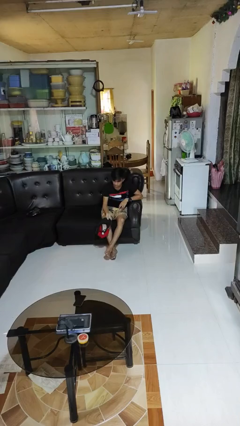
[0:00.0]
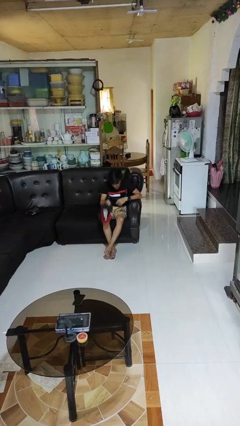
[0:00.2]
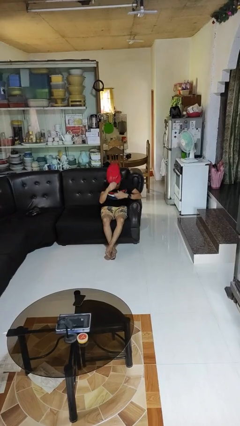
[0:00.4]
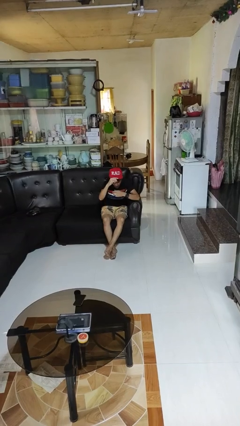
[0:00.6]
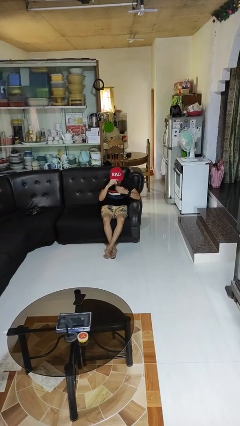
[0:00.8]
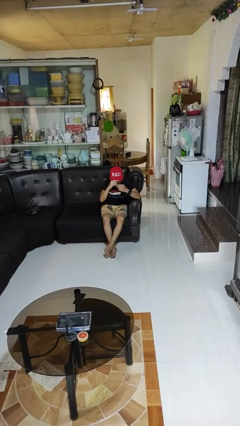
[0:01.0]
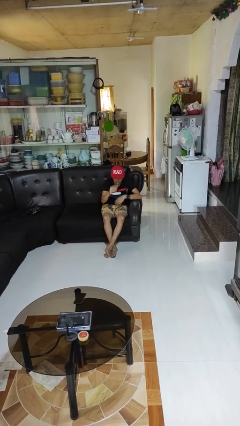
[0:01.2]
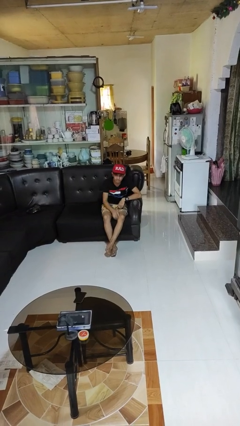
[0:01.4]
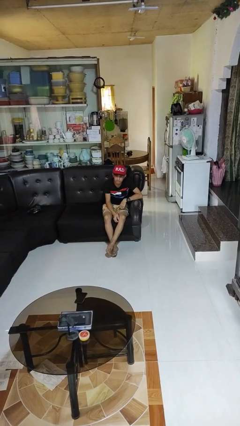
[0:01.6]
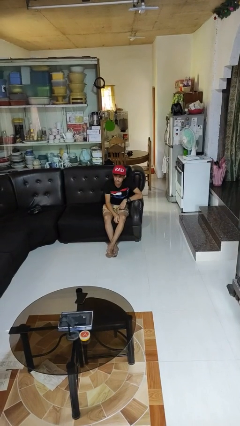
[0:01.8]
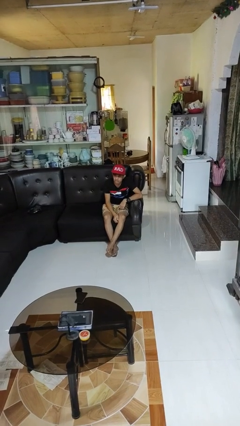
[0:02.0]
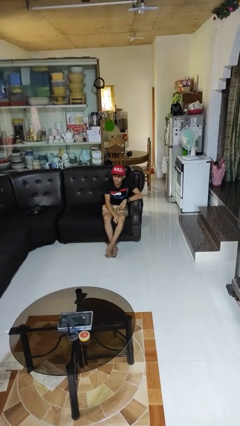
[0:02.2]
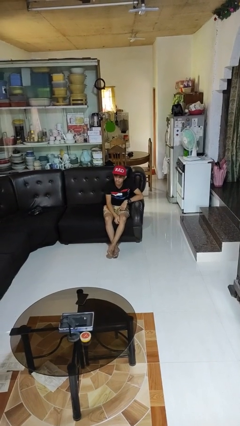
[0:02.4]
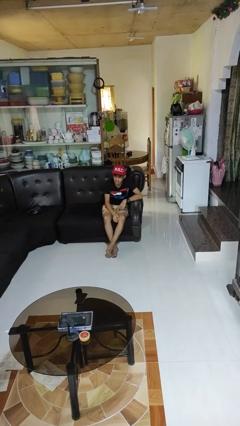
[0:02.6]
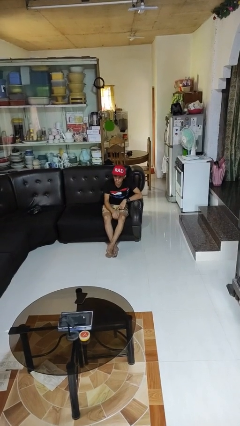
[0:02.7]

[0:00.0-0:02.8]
person puts on hat

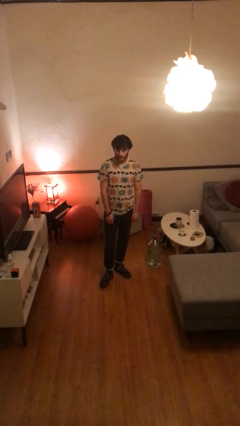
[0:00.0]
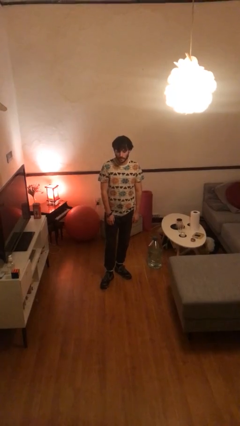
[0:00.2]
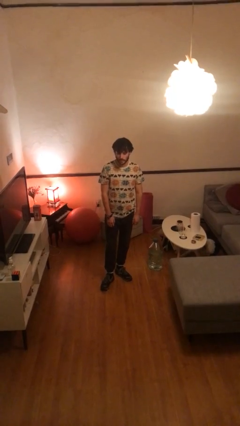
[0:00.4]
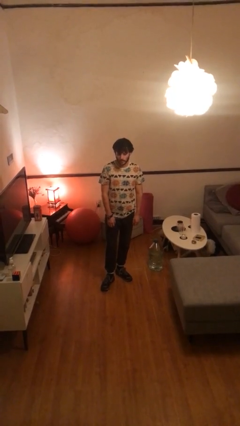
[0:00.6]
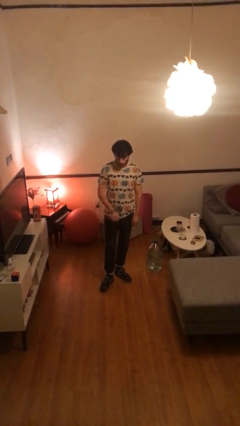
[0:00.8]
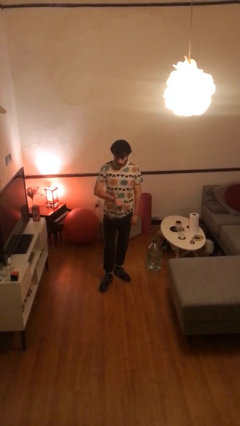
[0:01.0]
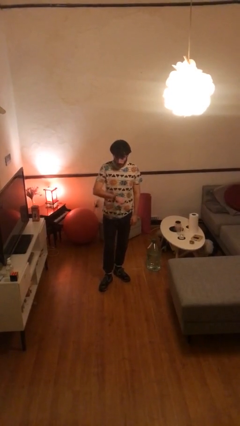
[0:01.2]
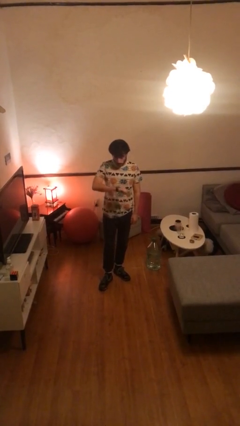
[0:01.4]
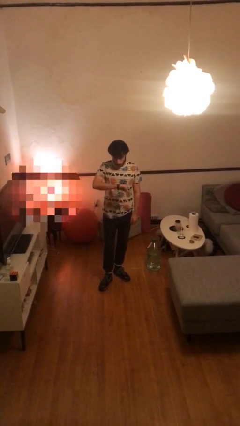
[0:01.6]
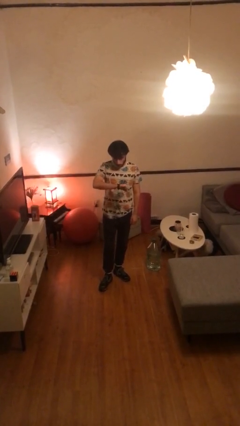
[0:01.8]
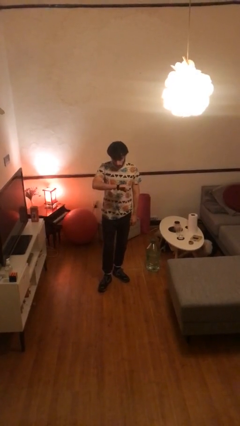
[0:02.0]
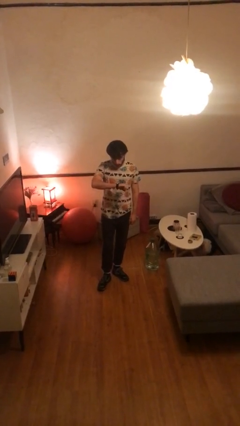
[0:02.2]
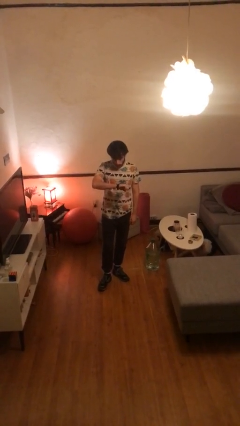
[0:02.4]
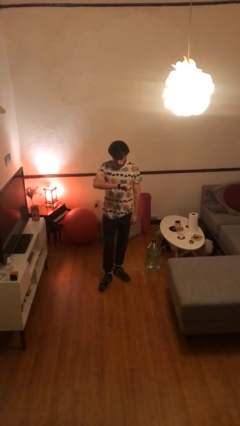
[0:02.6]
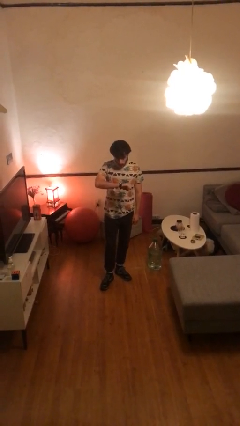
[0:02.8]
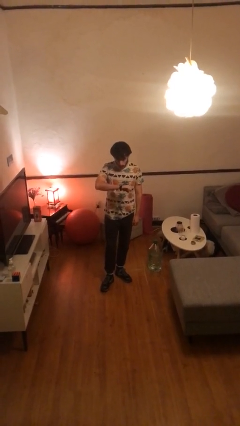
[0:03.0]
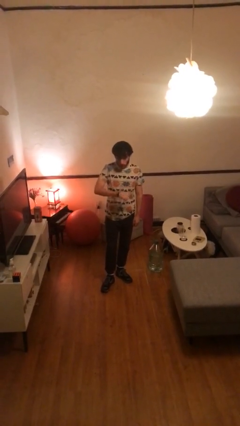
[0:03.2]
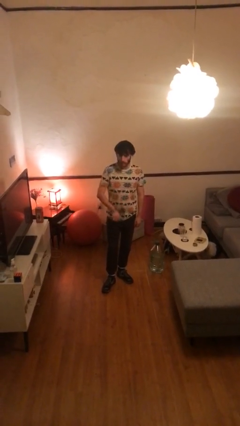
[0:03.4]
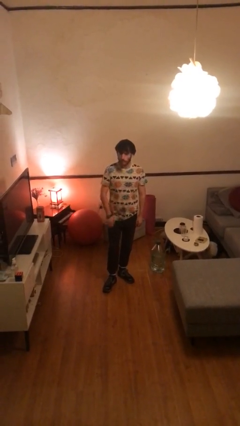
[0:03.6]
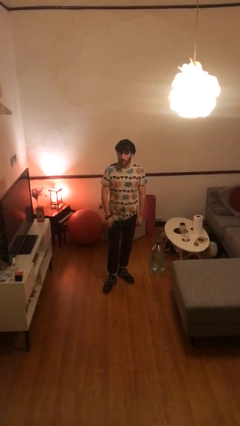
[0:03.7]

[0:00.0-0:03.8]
person looks at wristwatch

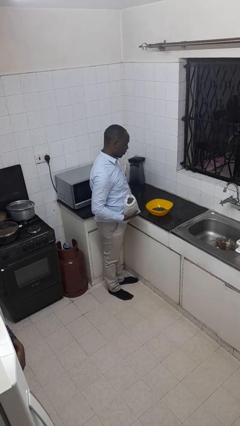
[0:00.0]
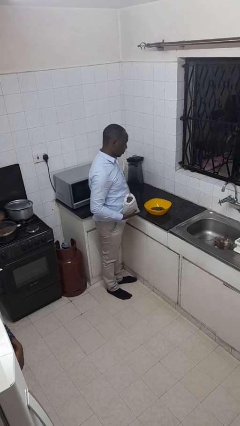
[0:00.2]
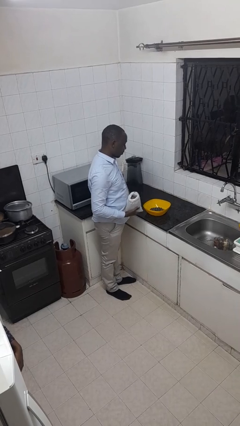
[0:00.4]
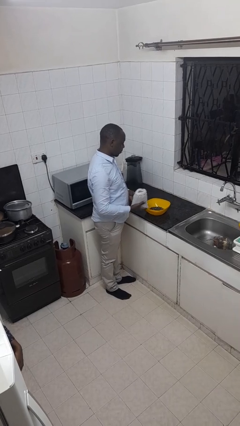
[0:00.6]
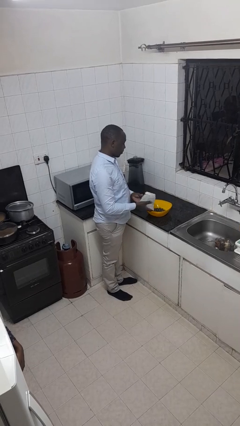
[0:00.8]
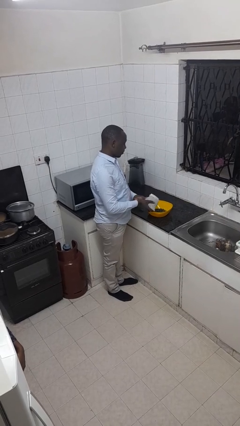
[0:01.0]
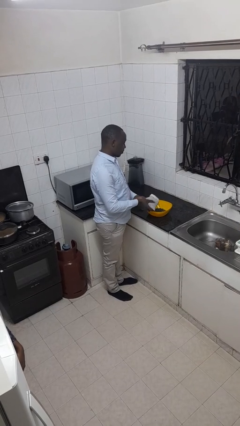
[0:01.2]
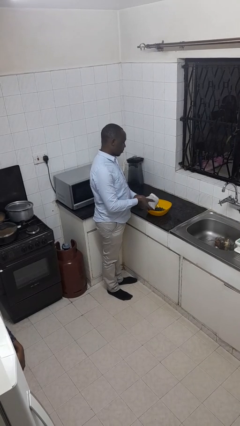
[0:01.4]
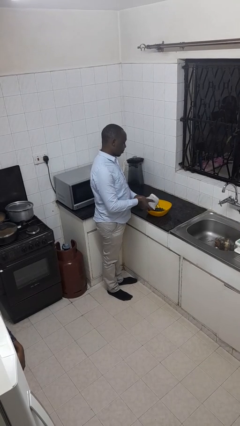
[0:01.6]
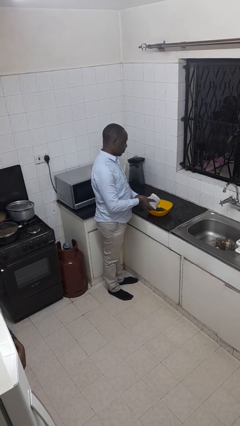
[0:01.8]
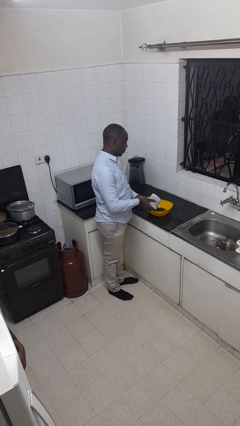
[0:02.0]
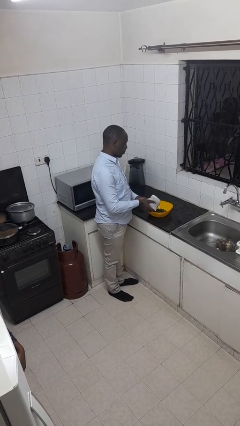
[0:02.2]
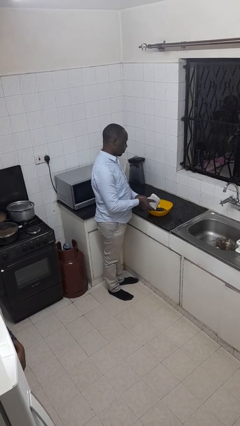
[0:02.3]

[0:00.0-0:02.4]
person pours into bowl

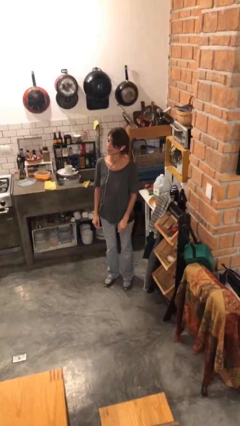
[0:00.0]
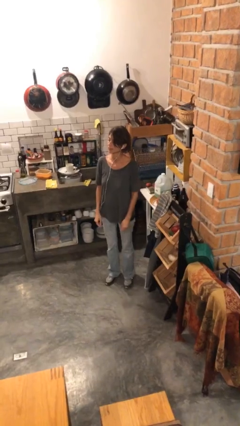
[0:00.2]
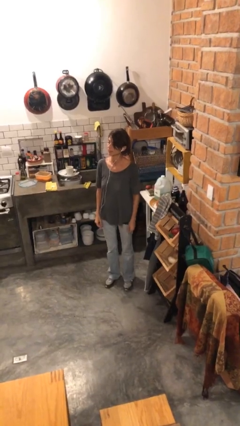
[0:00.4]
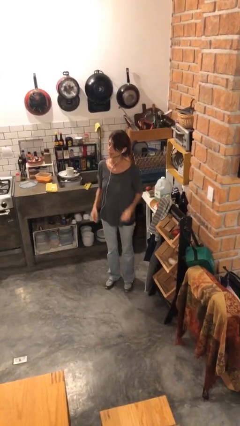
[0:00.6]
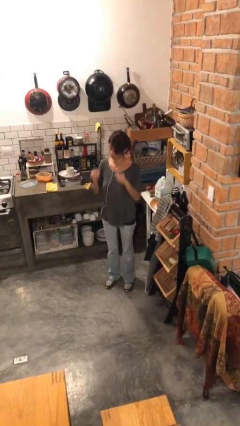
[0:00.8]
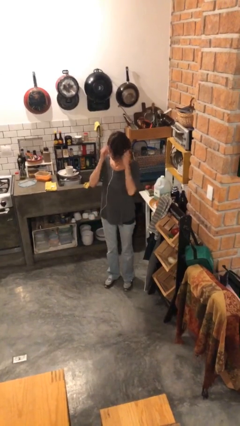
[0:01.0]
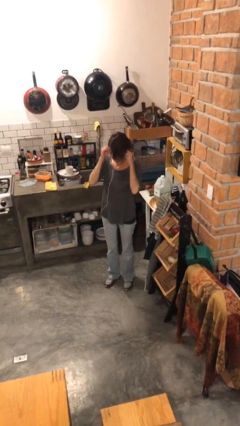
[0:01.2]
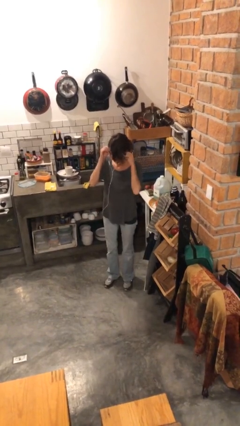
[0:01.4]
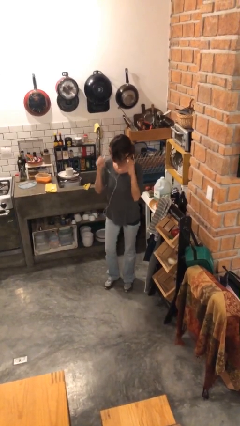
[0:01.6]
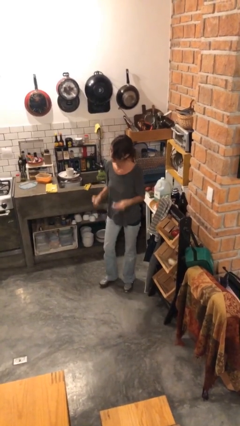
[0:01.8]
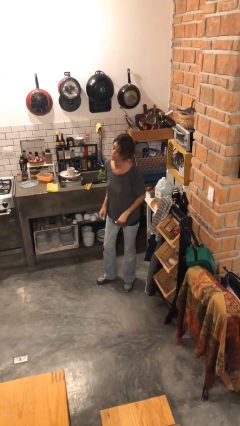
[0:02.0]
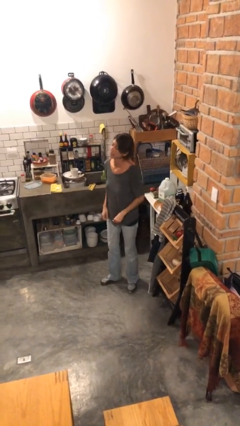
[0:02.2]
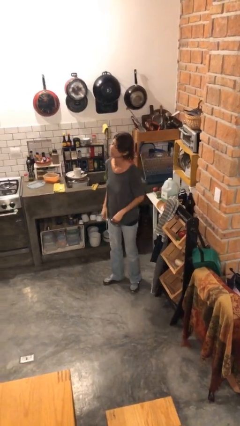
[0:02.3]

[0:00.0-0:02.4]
person takes off headphones

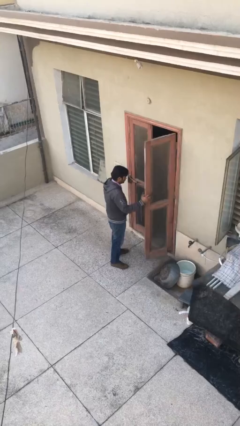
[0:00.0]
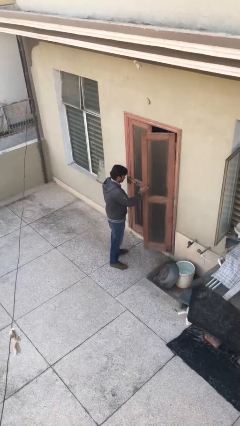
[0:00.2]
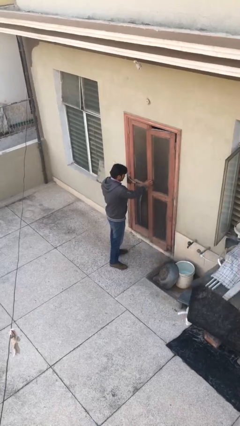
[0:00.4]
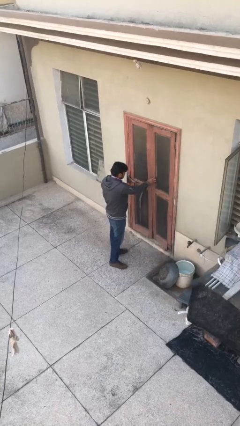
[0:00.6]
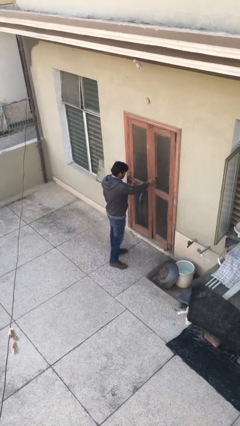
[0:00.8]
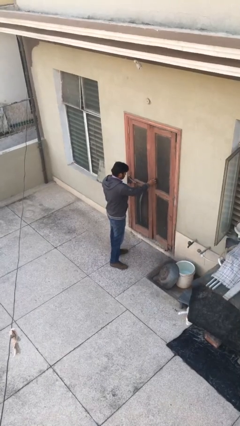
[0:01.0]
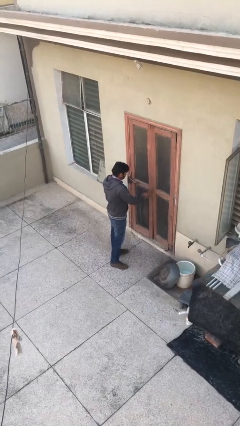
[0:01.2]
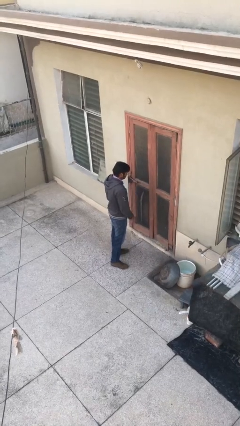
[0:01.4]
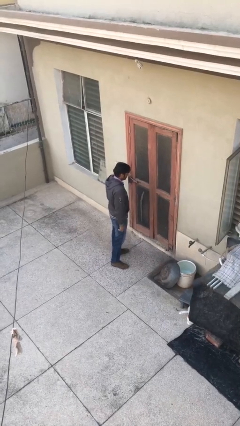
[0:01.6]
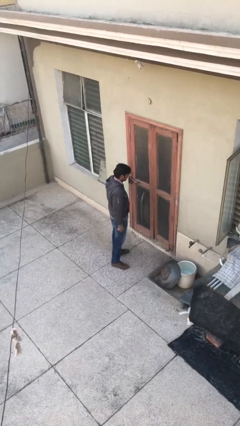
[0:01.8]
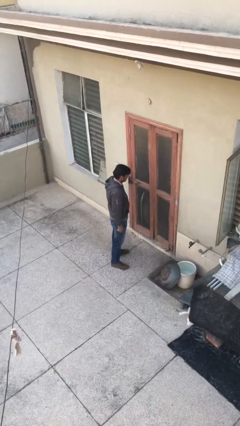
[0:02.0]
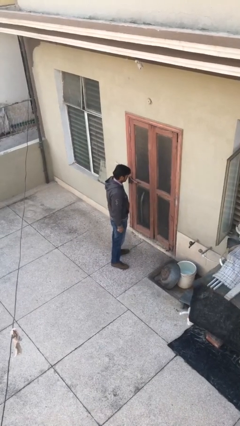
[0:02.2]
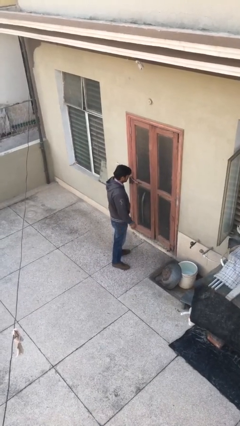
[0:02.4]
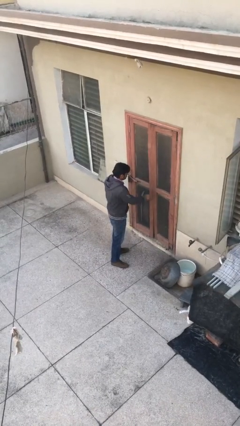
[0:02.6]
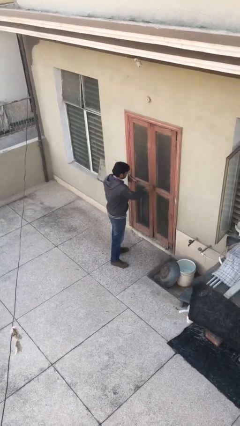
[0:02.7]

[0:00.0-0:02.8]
person closes facility door

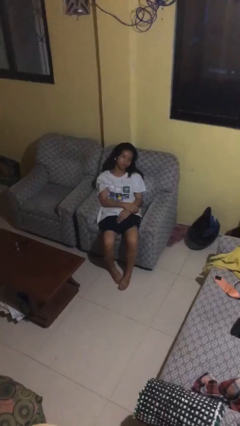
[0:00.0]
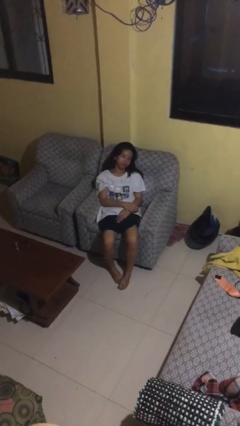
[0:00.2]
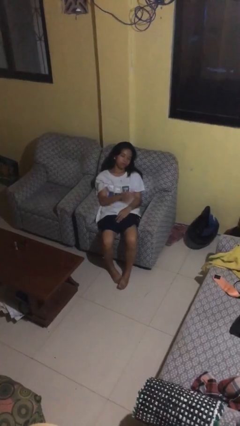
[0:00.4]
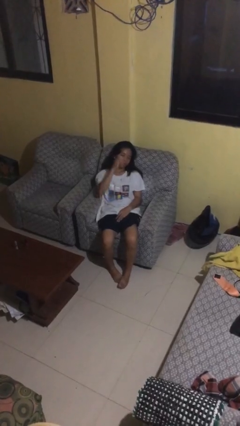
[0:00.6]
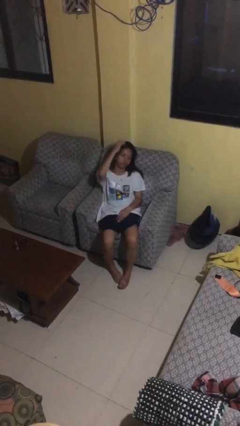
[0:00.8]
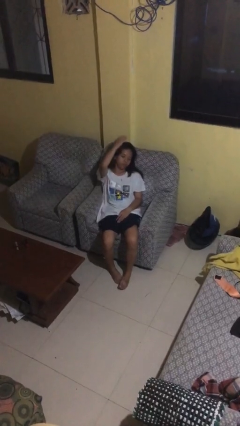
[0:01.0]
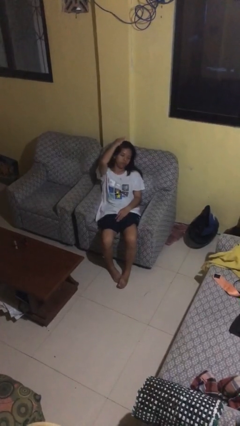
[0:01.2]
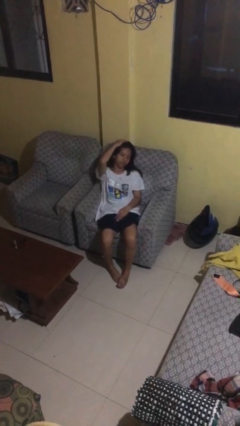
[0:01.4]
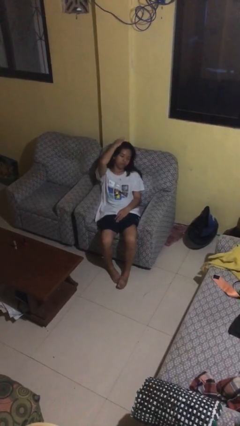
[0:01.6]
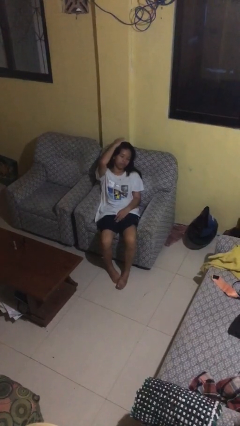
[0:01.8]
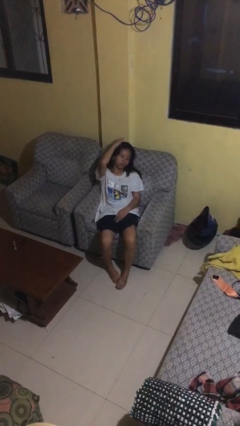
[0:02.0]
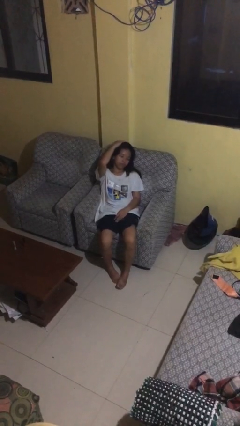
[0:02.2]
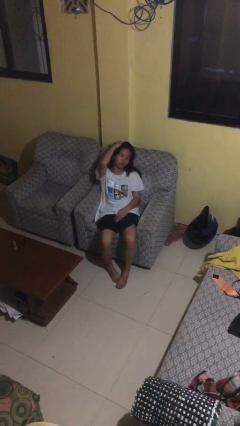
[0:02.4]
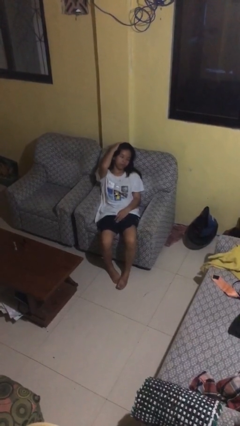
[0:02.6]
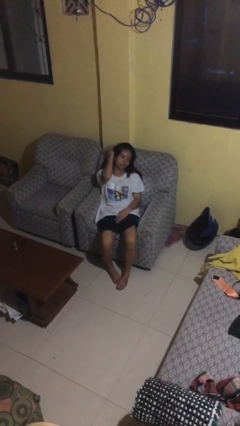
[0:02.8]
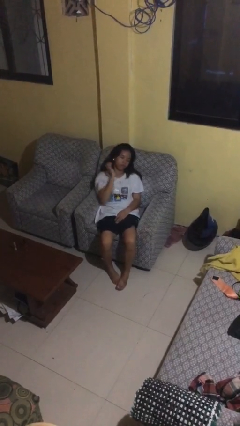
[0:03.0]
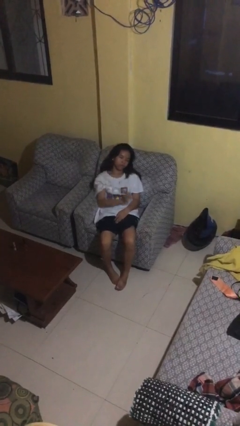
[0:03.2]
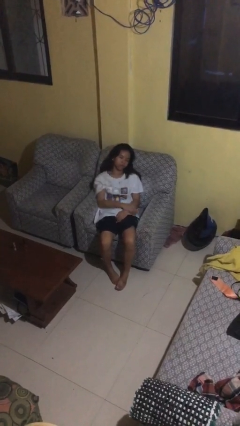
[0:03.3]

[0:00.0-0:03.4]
person pats head
